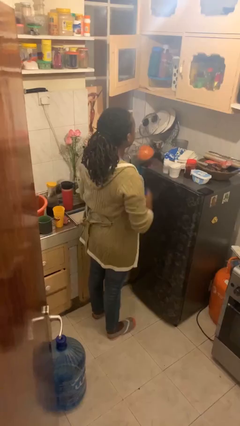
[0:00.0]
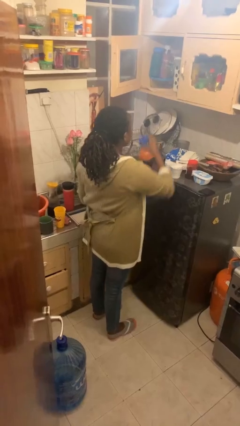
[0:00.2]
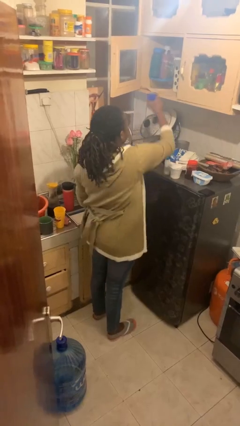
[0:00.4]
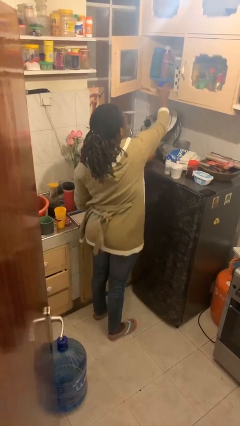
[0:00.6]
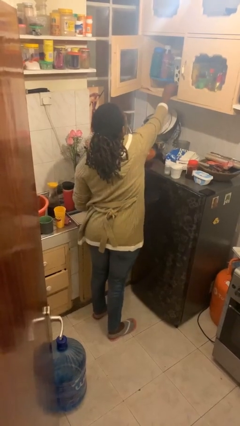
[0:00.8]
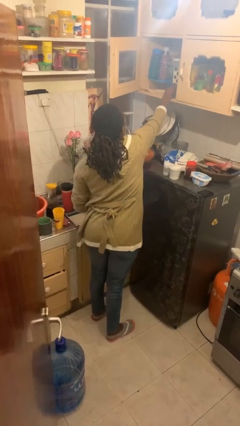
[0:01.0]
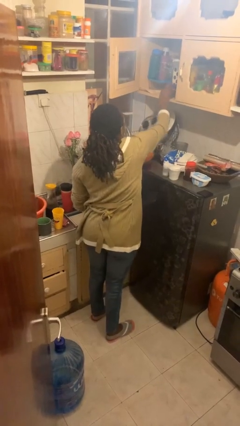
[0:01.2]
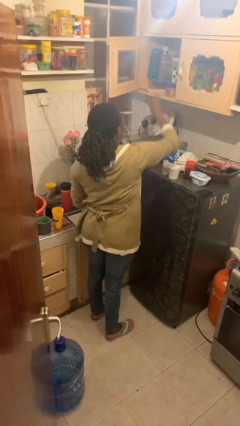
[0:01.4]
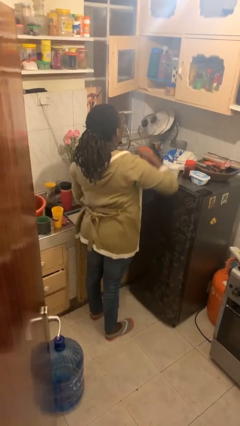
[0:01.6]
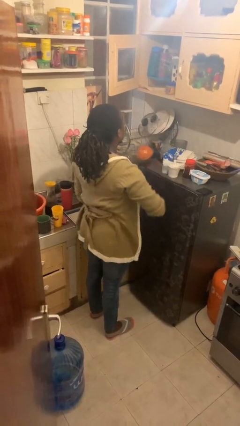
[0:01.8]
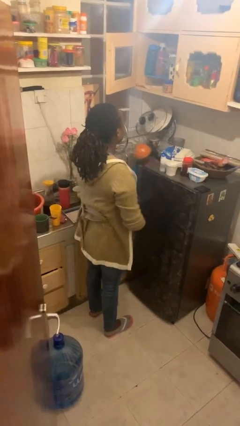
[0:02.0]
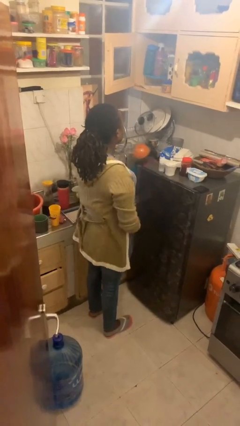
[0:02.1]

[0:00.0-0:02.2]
person puts down object on countertop

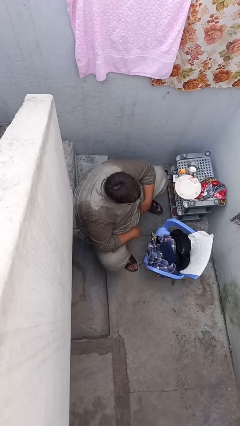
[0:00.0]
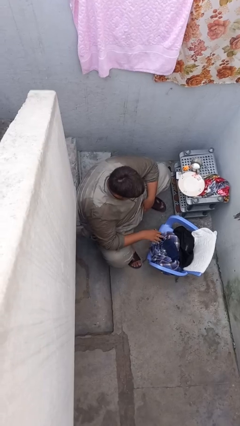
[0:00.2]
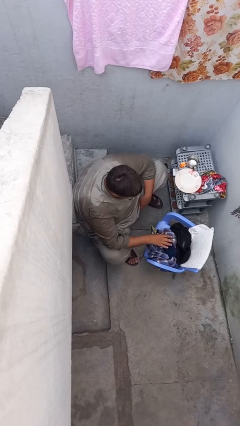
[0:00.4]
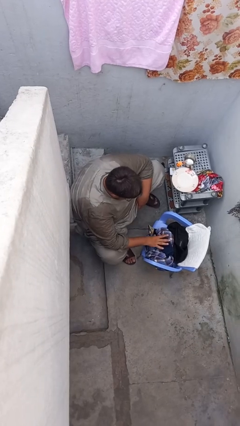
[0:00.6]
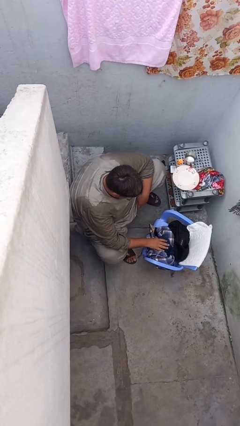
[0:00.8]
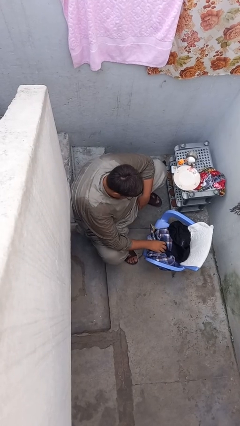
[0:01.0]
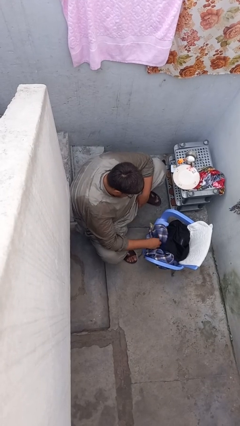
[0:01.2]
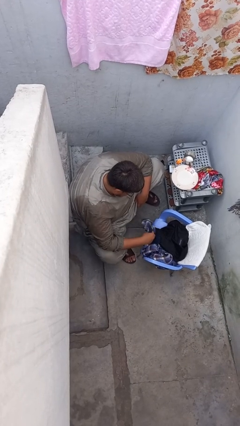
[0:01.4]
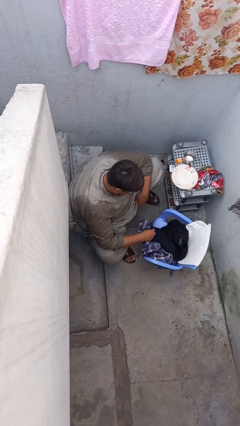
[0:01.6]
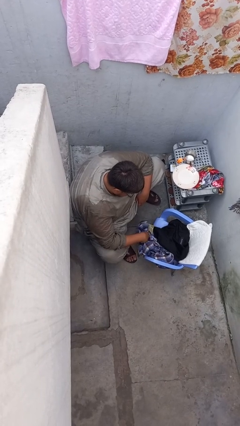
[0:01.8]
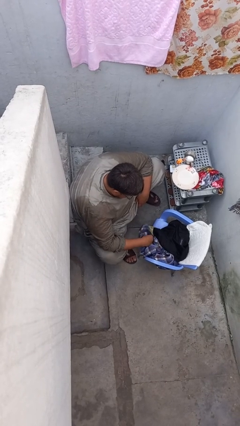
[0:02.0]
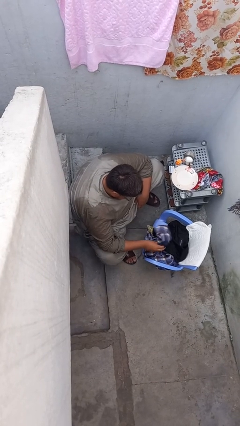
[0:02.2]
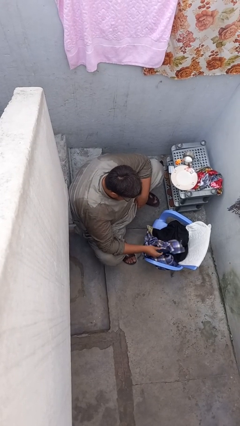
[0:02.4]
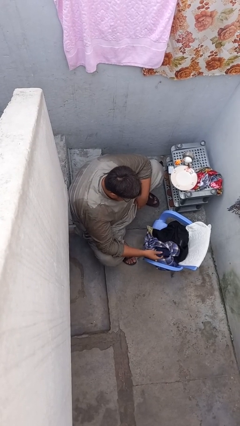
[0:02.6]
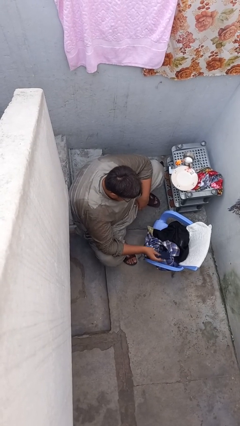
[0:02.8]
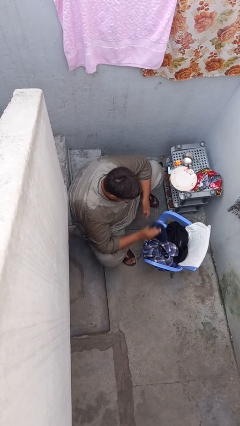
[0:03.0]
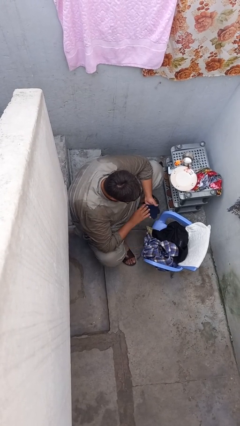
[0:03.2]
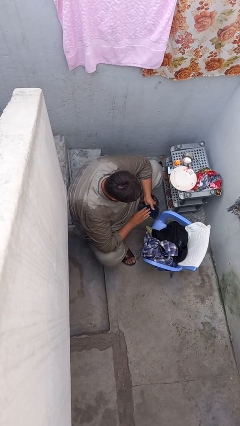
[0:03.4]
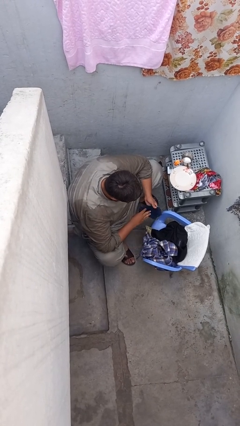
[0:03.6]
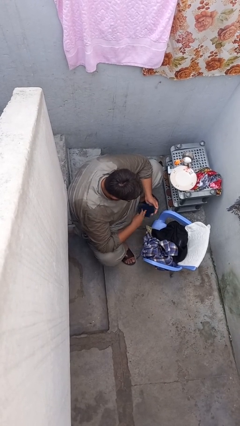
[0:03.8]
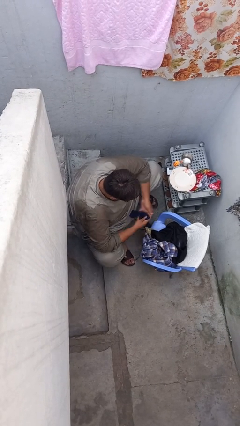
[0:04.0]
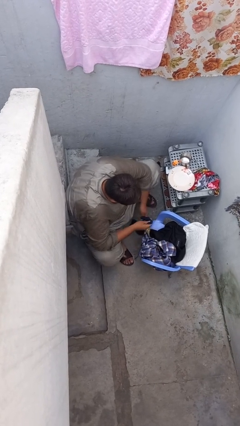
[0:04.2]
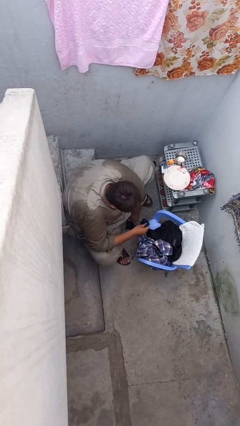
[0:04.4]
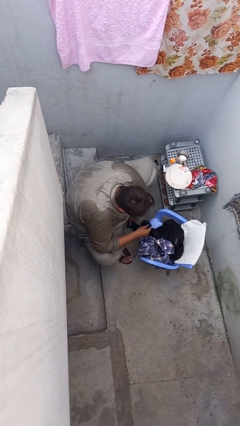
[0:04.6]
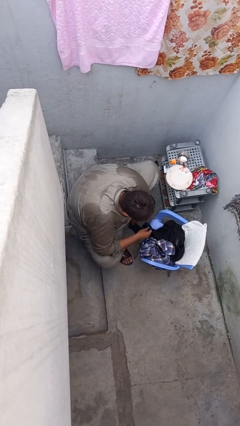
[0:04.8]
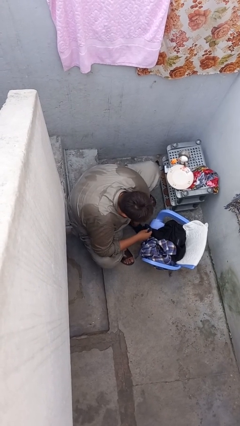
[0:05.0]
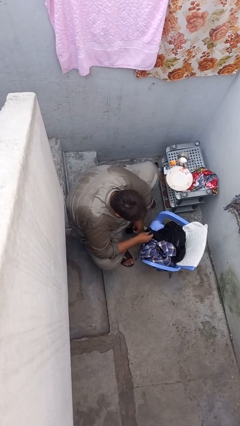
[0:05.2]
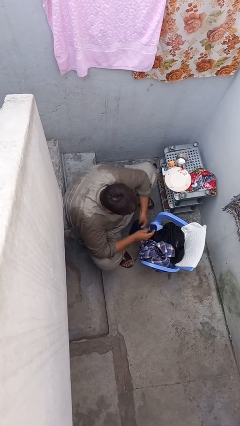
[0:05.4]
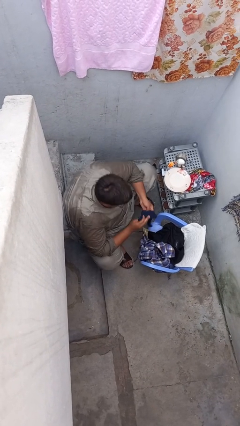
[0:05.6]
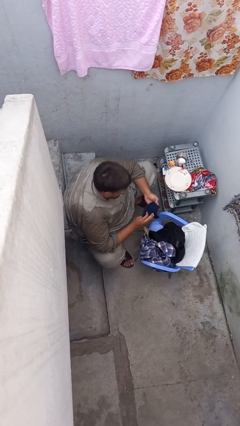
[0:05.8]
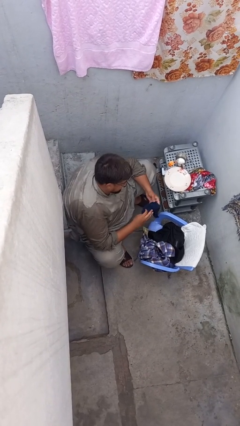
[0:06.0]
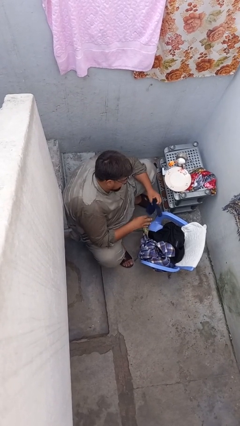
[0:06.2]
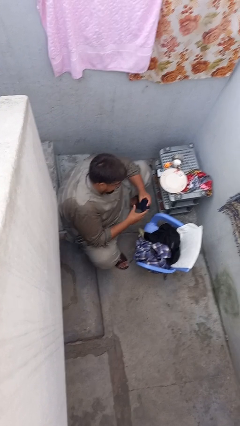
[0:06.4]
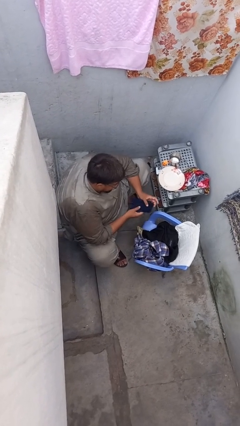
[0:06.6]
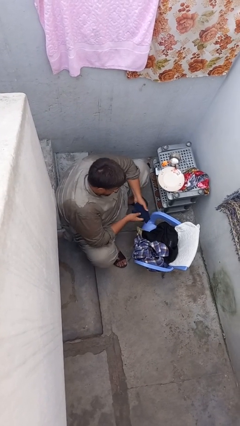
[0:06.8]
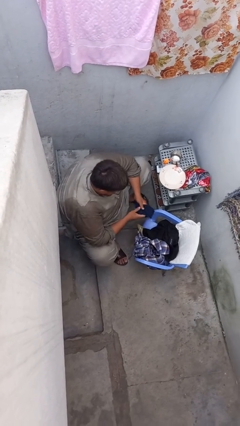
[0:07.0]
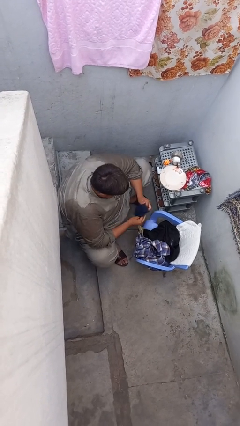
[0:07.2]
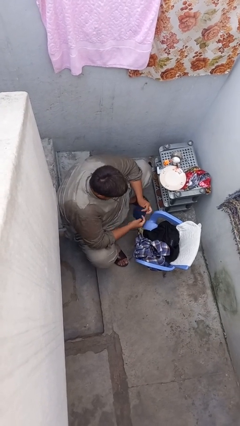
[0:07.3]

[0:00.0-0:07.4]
person folds socks

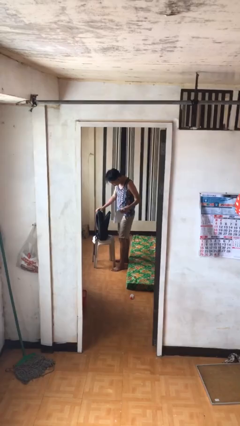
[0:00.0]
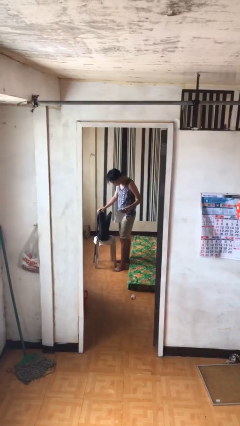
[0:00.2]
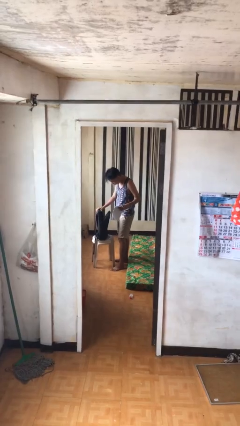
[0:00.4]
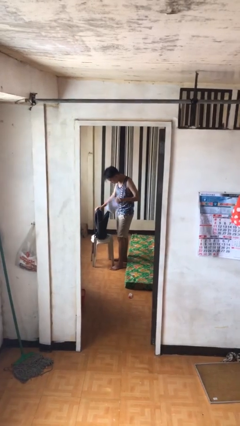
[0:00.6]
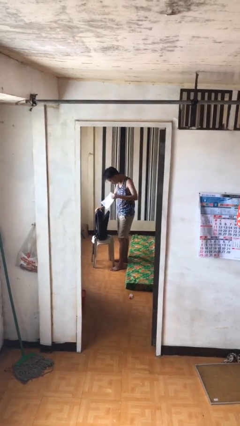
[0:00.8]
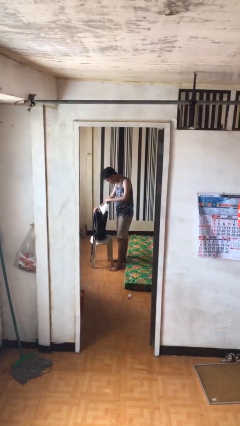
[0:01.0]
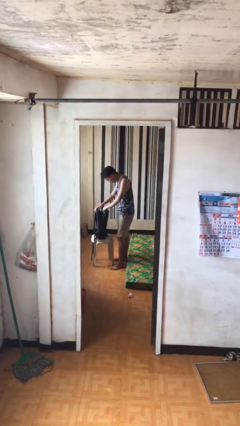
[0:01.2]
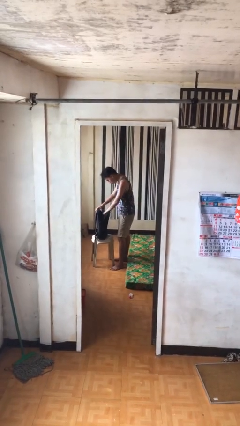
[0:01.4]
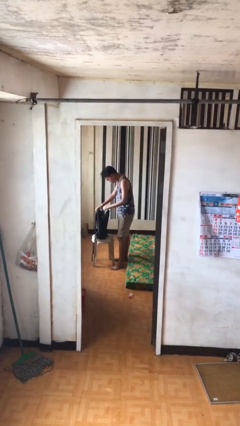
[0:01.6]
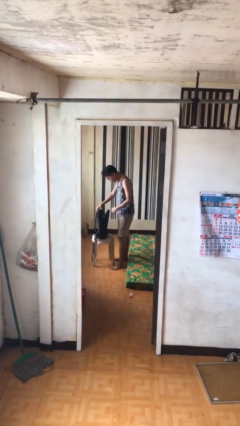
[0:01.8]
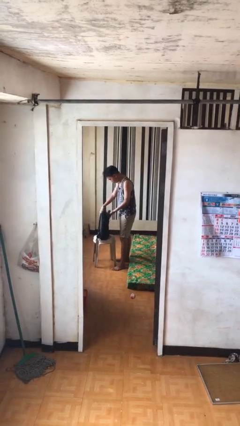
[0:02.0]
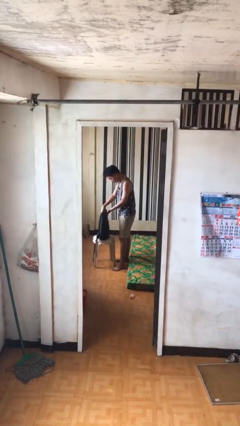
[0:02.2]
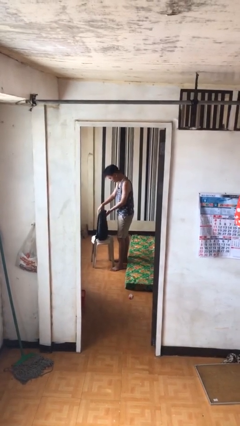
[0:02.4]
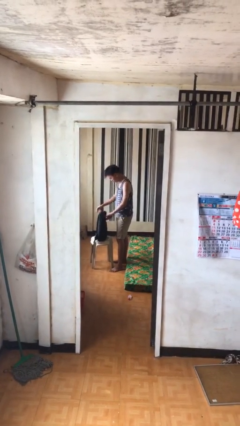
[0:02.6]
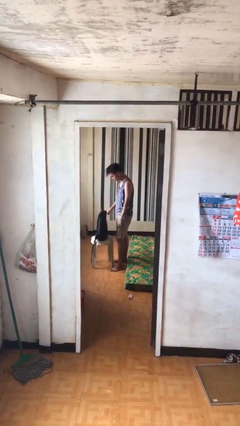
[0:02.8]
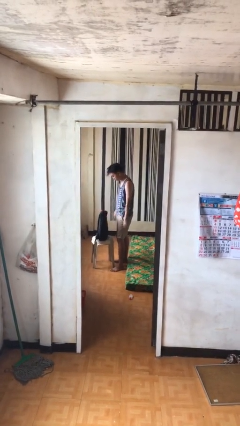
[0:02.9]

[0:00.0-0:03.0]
person puts object into backpack

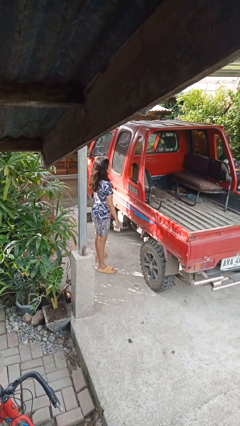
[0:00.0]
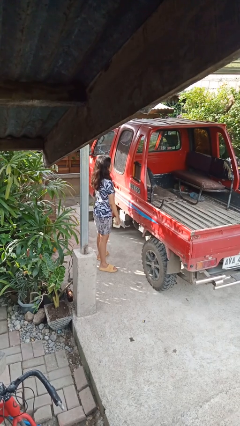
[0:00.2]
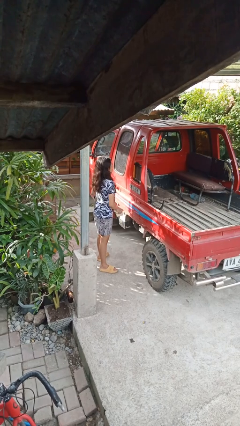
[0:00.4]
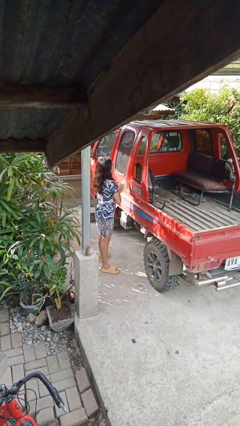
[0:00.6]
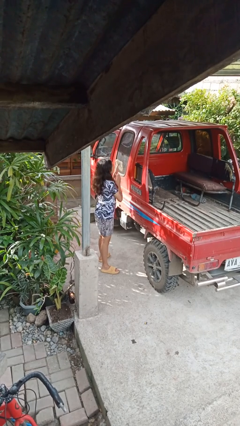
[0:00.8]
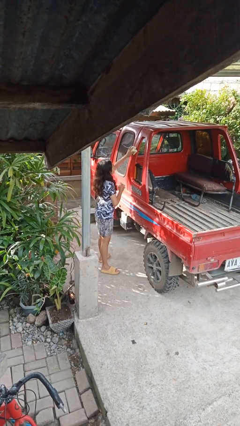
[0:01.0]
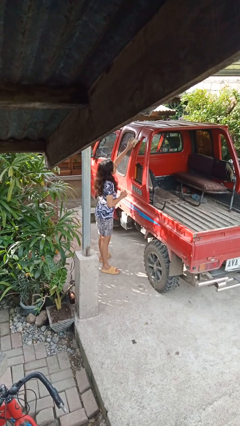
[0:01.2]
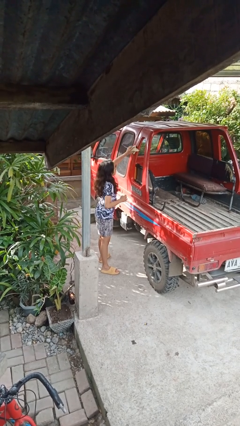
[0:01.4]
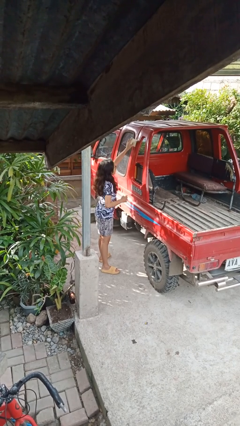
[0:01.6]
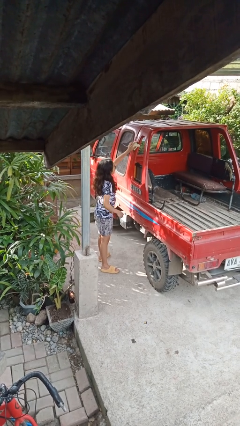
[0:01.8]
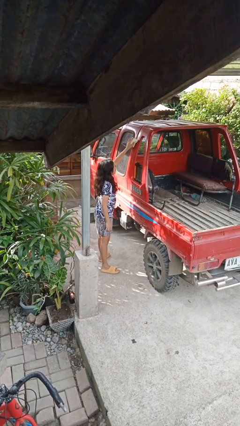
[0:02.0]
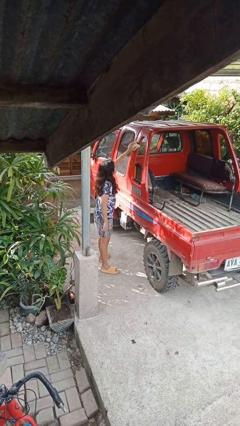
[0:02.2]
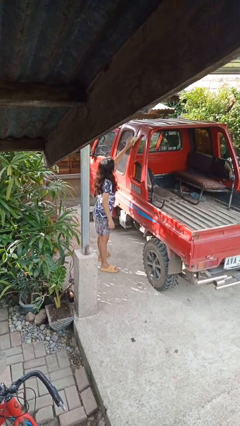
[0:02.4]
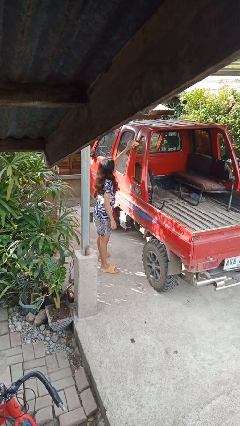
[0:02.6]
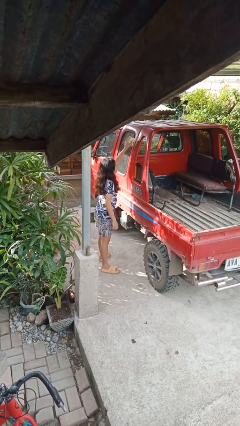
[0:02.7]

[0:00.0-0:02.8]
person polishes car with rag

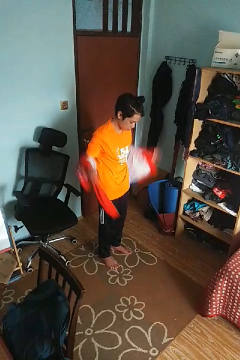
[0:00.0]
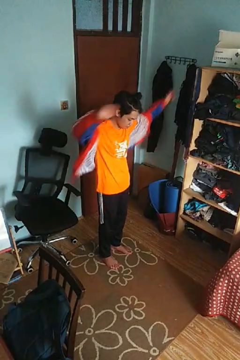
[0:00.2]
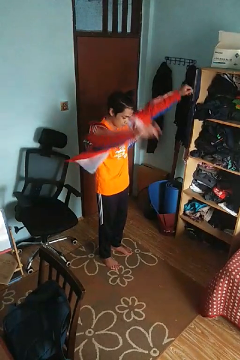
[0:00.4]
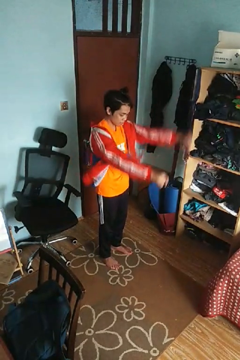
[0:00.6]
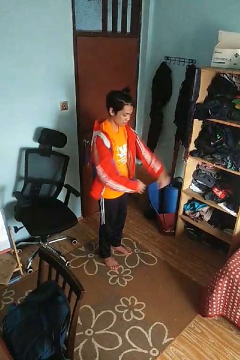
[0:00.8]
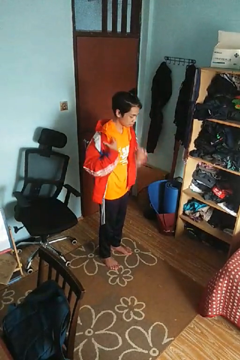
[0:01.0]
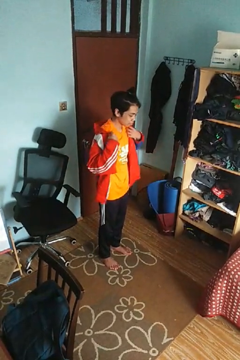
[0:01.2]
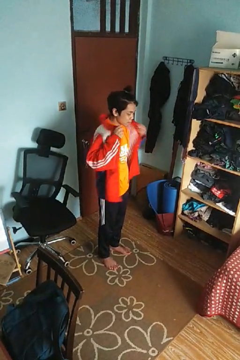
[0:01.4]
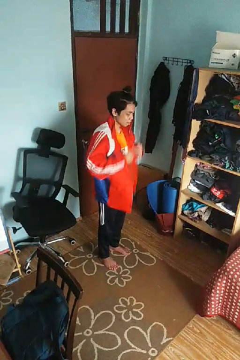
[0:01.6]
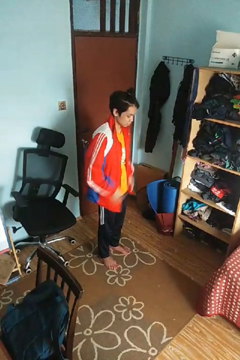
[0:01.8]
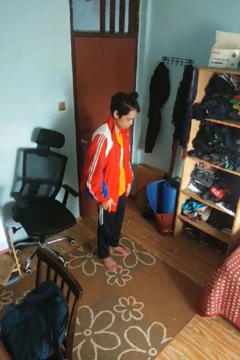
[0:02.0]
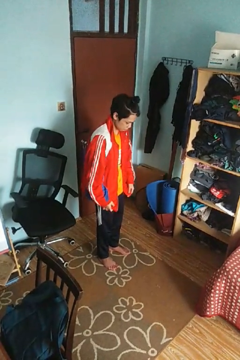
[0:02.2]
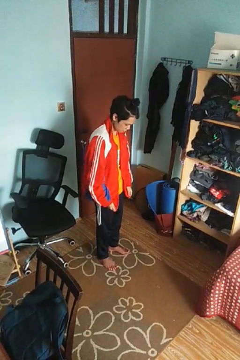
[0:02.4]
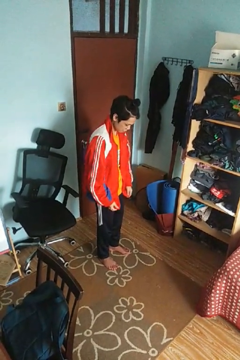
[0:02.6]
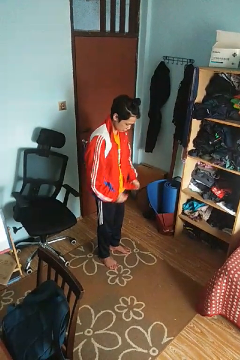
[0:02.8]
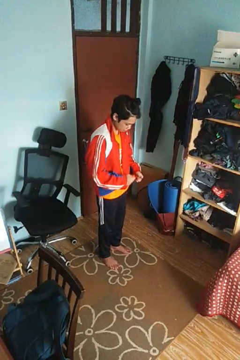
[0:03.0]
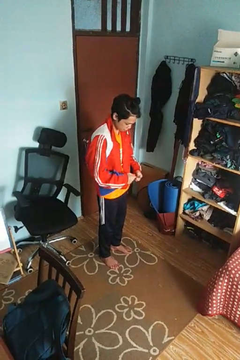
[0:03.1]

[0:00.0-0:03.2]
person puts on jacket
